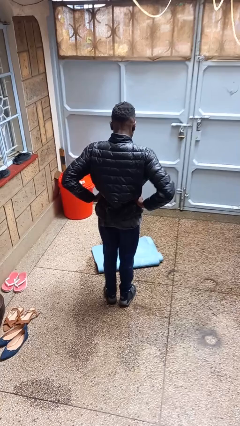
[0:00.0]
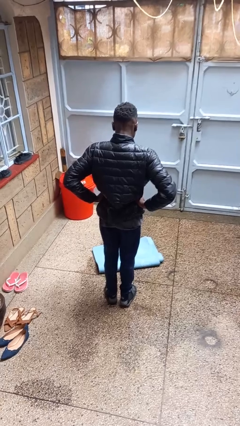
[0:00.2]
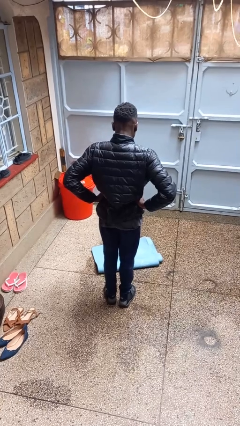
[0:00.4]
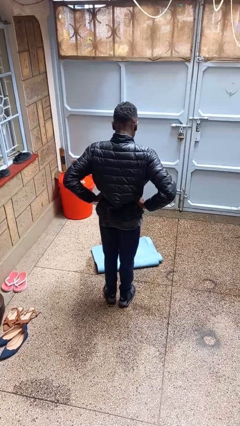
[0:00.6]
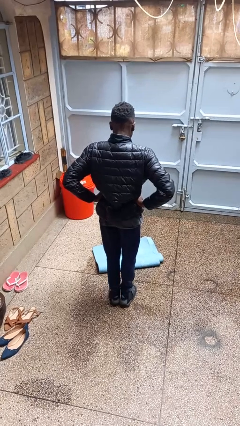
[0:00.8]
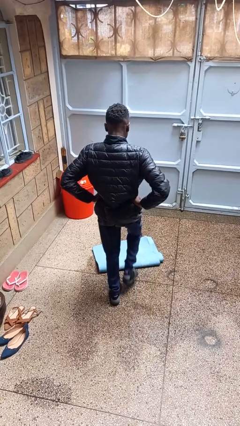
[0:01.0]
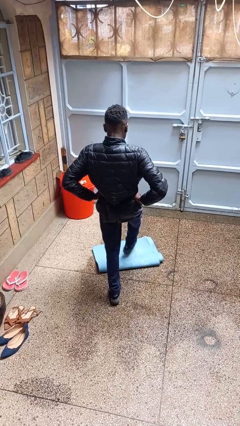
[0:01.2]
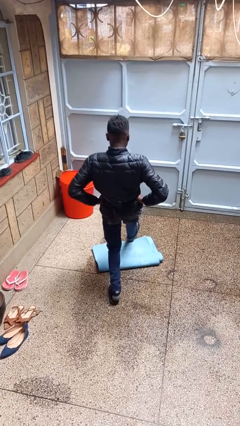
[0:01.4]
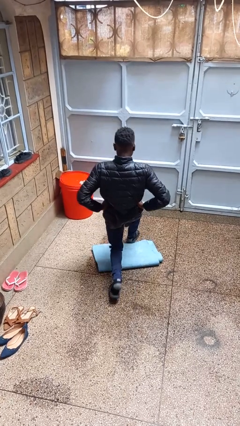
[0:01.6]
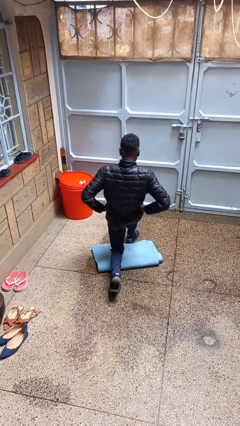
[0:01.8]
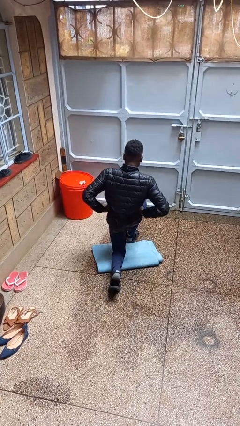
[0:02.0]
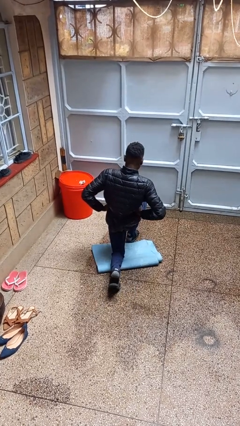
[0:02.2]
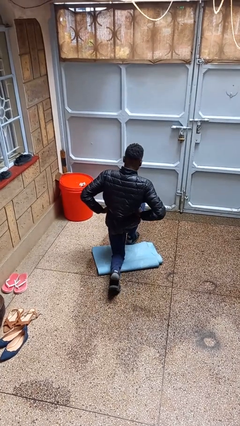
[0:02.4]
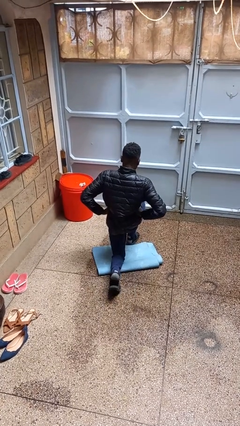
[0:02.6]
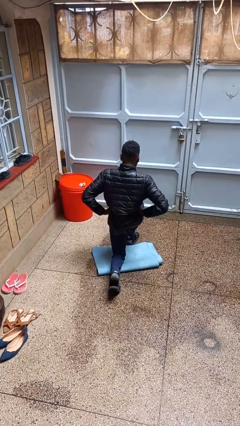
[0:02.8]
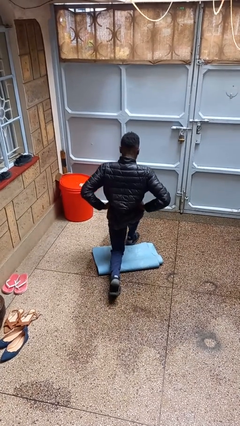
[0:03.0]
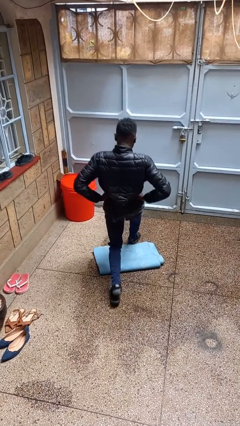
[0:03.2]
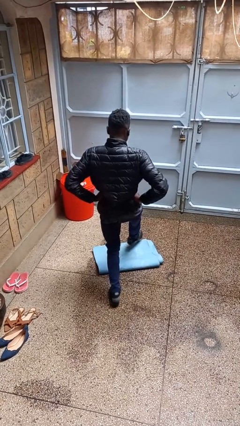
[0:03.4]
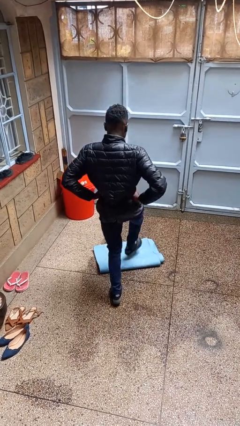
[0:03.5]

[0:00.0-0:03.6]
person exercises with lunges

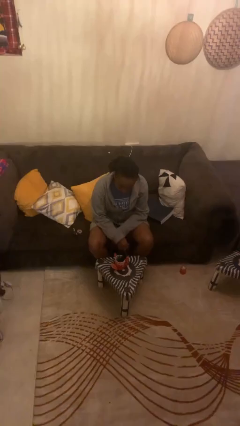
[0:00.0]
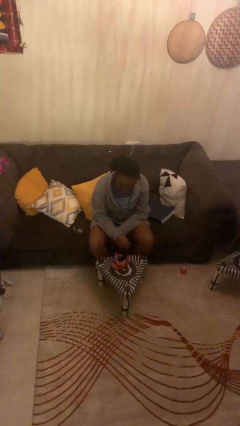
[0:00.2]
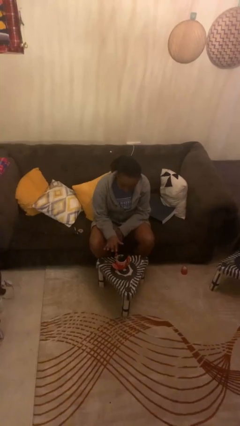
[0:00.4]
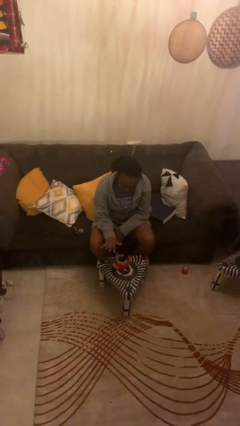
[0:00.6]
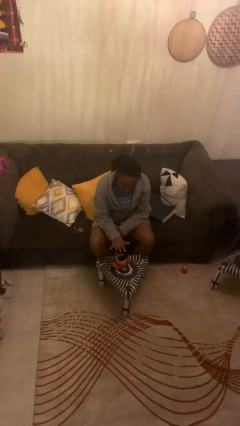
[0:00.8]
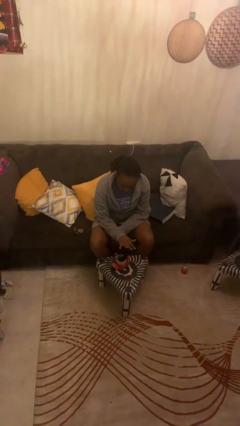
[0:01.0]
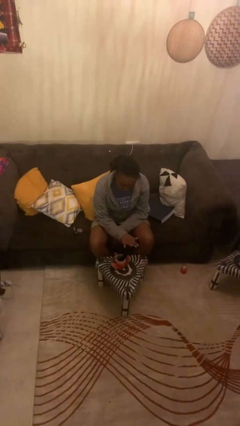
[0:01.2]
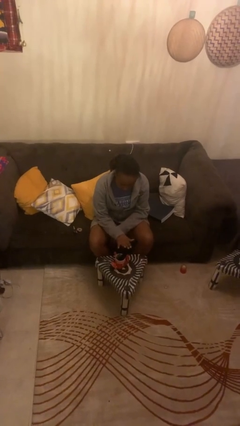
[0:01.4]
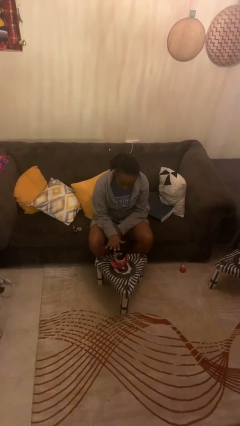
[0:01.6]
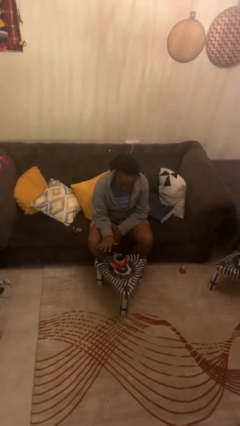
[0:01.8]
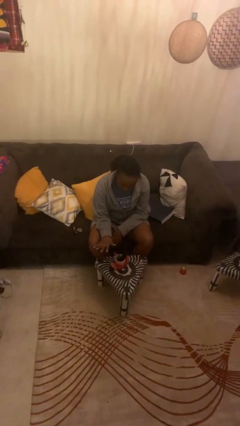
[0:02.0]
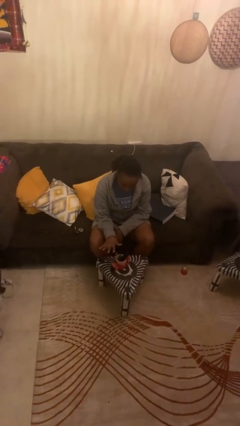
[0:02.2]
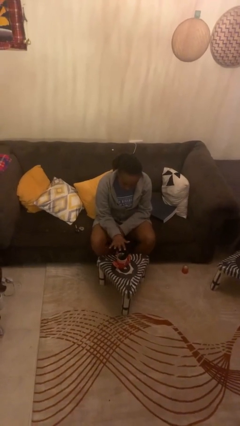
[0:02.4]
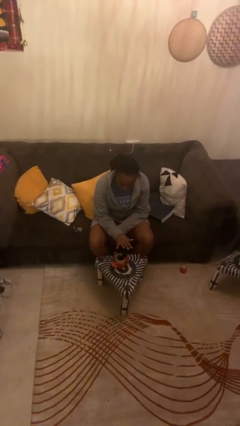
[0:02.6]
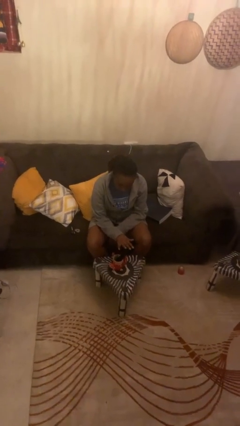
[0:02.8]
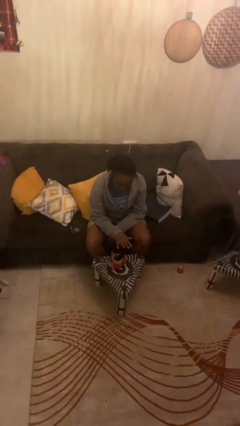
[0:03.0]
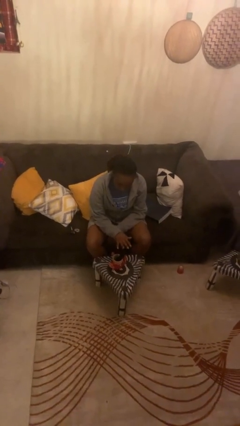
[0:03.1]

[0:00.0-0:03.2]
person waves hand over object

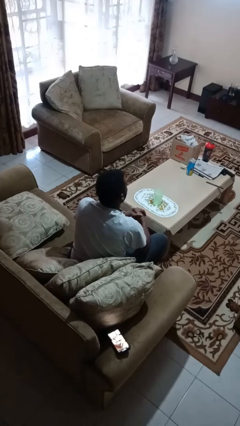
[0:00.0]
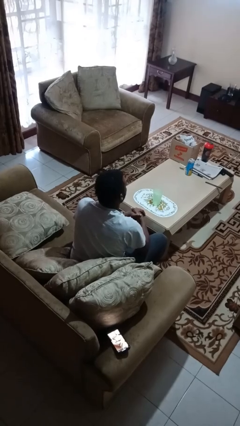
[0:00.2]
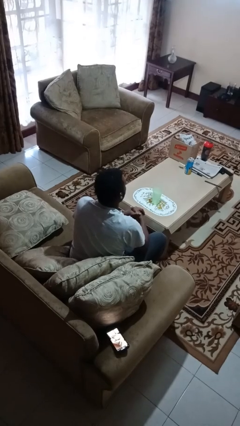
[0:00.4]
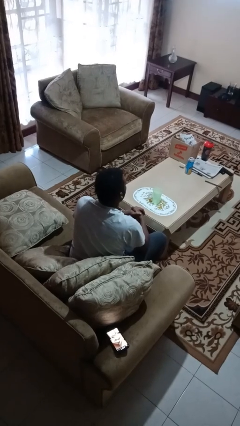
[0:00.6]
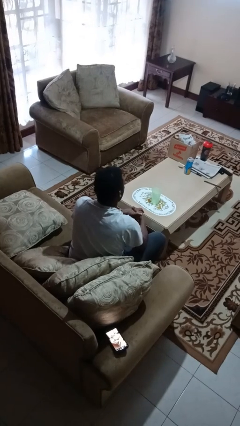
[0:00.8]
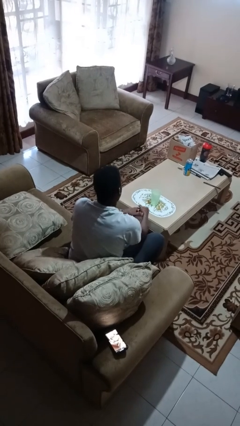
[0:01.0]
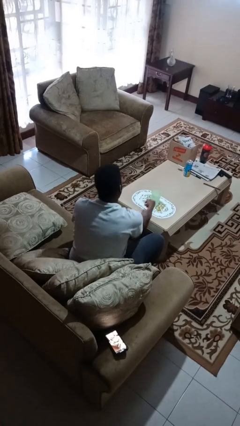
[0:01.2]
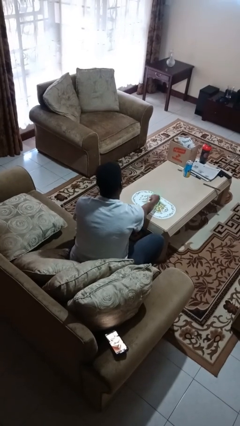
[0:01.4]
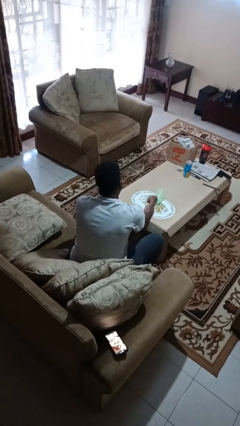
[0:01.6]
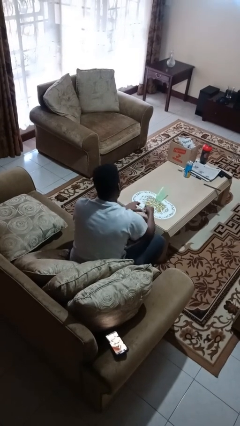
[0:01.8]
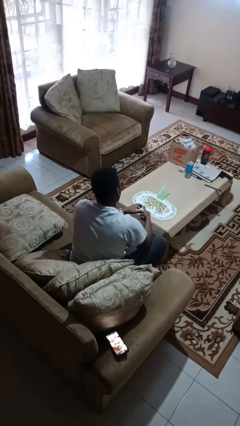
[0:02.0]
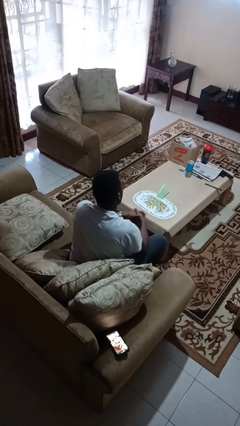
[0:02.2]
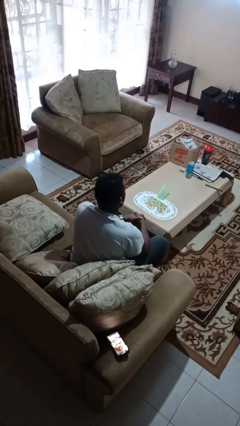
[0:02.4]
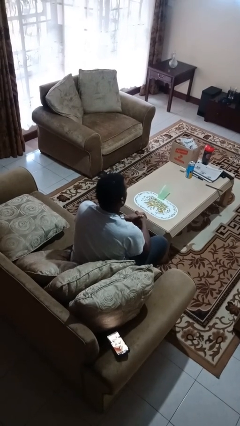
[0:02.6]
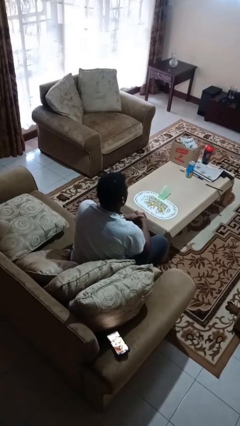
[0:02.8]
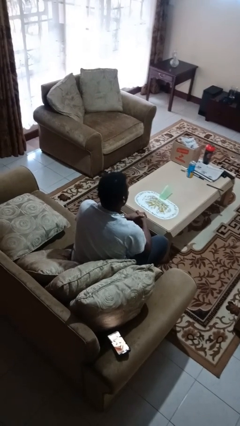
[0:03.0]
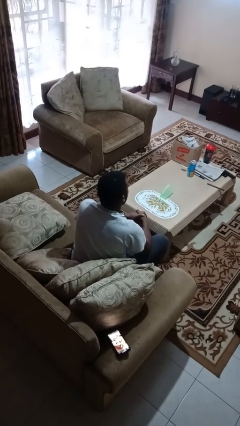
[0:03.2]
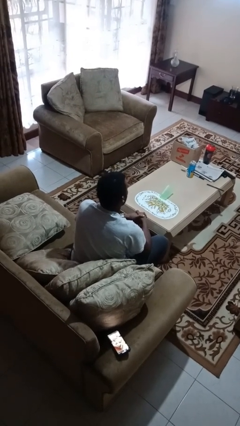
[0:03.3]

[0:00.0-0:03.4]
person knocks over glass

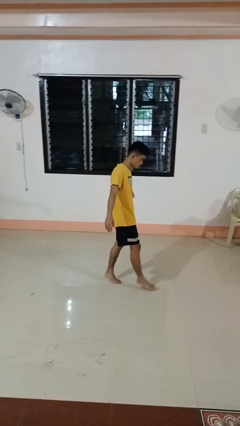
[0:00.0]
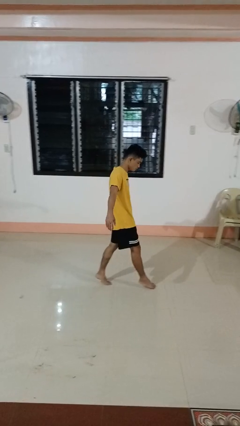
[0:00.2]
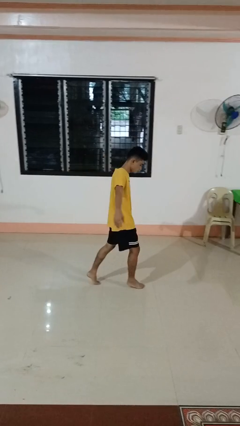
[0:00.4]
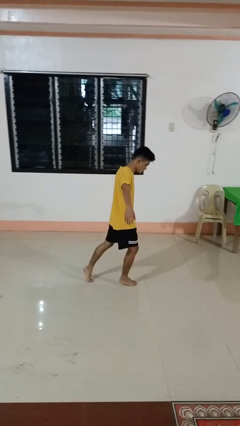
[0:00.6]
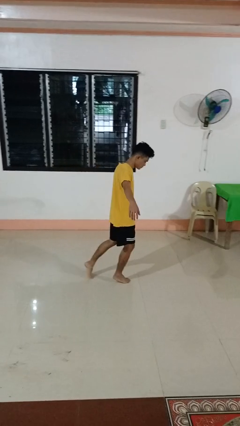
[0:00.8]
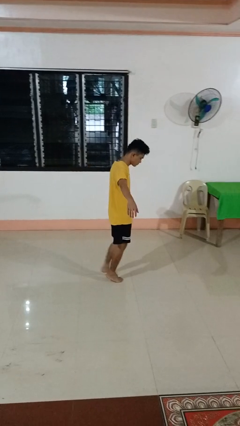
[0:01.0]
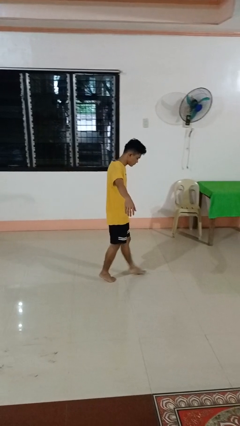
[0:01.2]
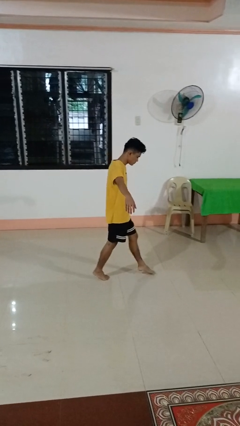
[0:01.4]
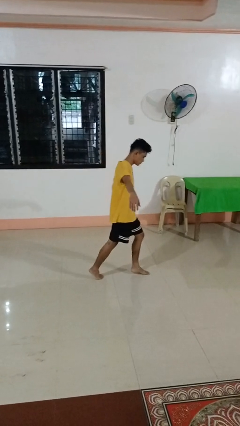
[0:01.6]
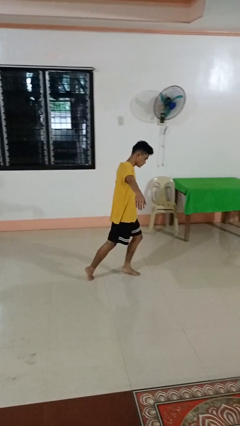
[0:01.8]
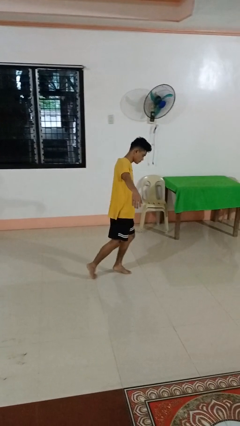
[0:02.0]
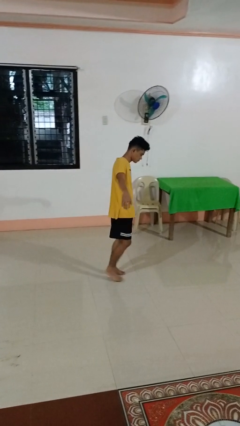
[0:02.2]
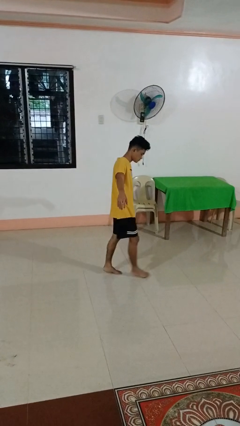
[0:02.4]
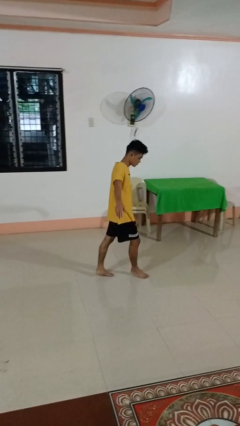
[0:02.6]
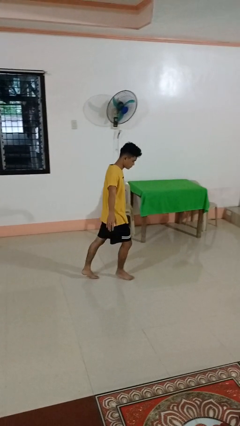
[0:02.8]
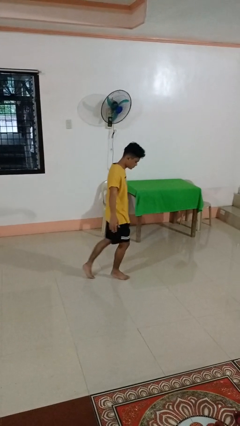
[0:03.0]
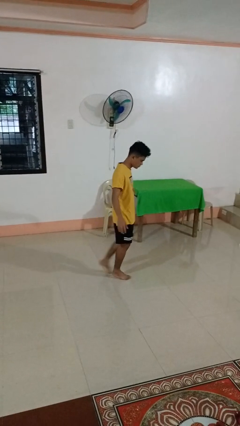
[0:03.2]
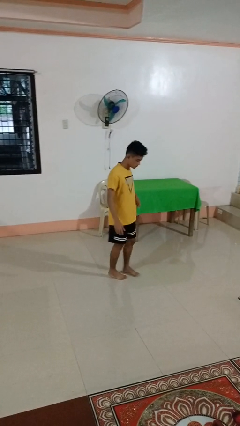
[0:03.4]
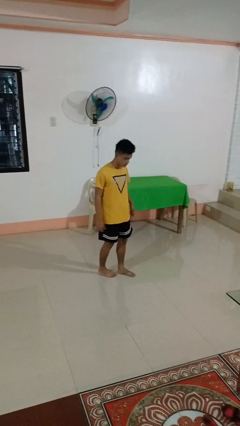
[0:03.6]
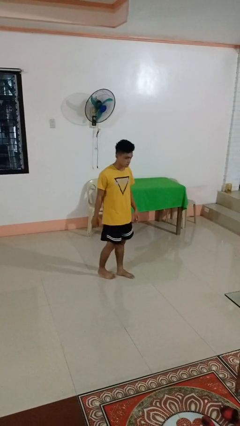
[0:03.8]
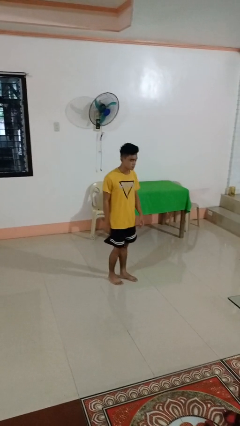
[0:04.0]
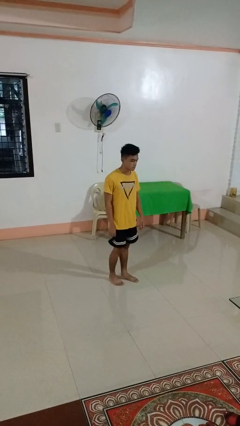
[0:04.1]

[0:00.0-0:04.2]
person walks tiptoe

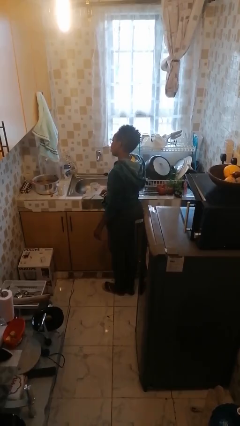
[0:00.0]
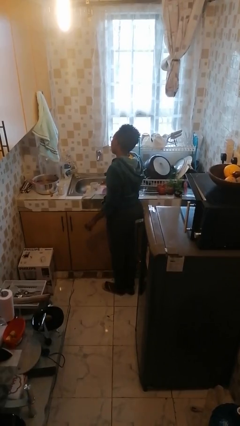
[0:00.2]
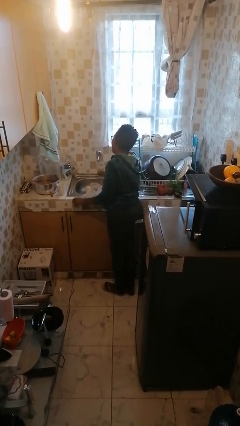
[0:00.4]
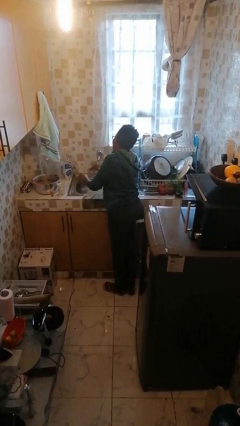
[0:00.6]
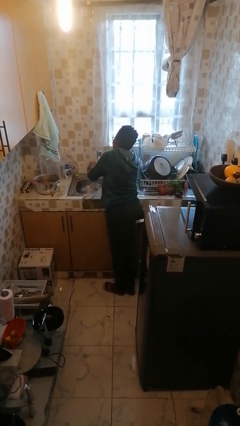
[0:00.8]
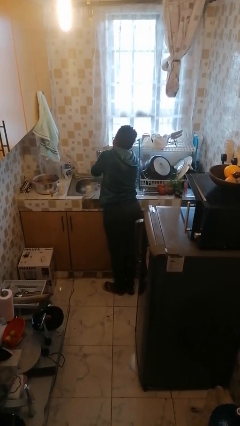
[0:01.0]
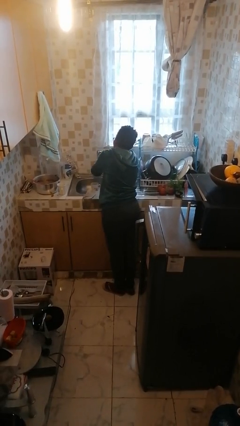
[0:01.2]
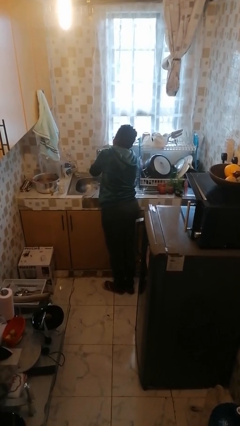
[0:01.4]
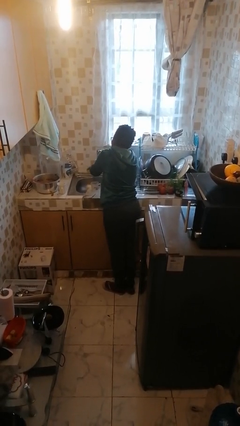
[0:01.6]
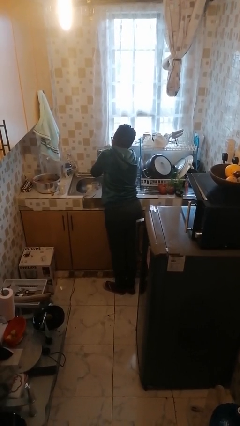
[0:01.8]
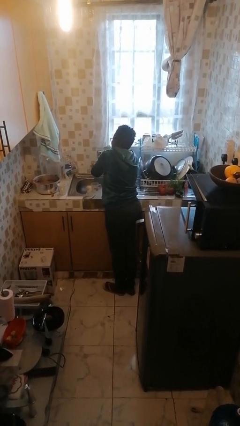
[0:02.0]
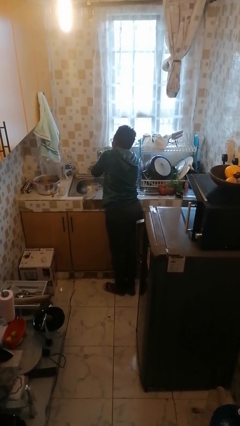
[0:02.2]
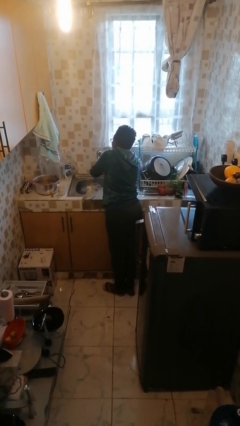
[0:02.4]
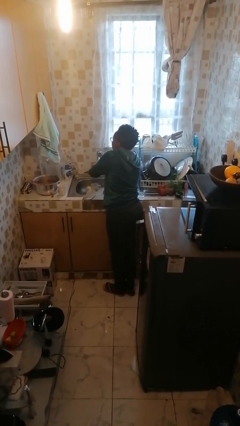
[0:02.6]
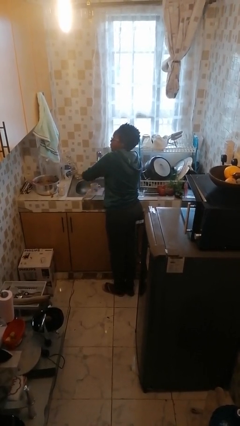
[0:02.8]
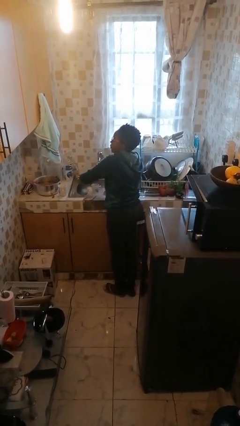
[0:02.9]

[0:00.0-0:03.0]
person washes hands
